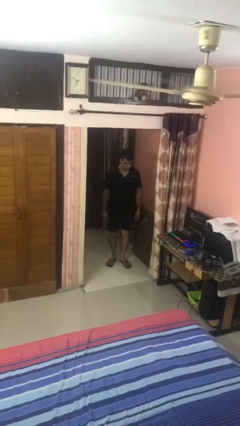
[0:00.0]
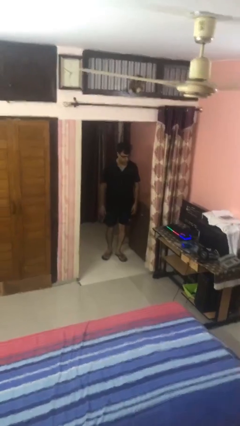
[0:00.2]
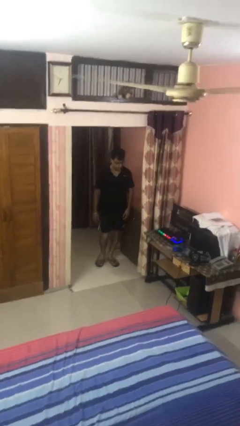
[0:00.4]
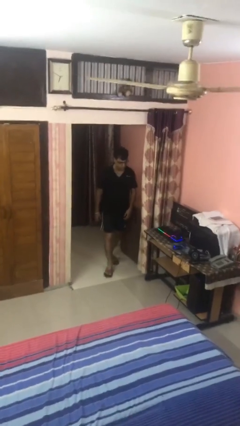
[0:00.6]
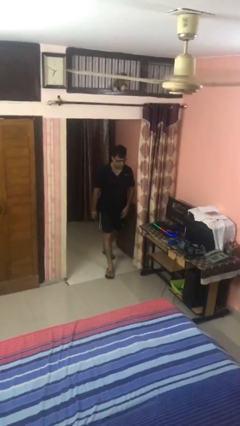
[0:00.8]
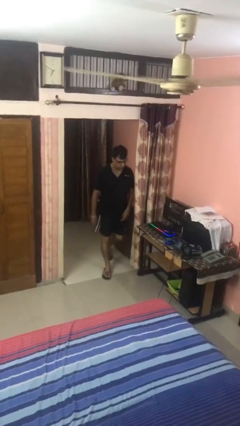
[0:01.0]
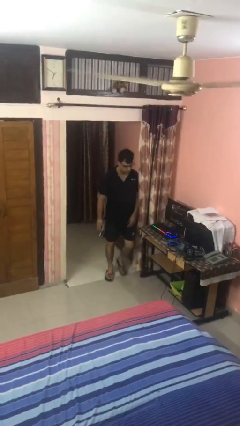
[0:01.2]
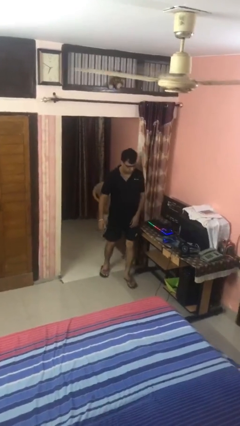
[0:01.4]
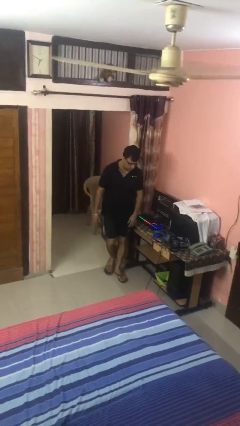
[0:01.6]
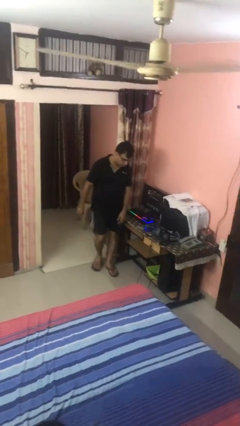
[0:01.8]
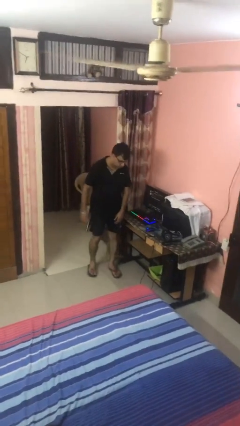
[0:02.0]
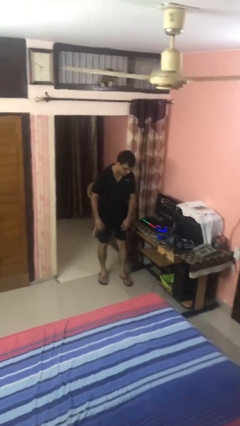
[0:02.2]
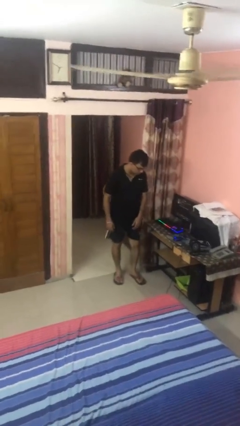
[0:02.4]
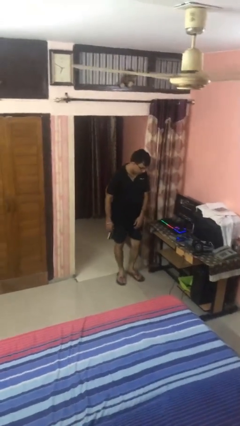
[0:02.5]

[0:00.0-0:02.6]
person bumps into table

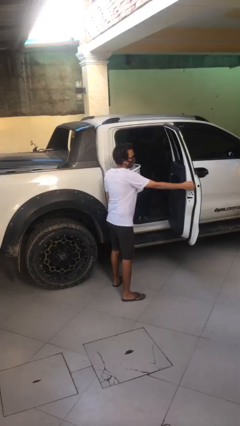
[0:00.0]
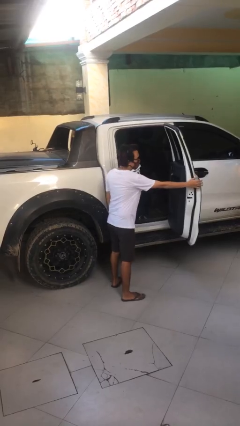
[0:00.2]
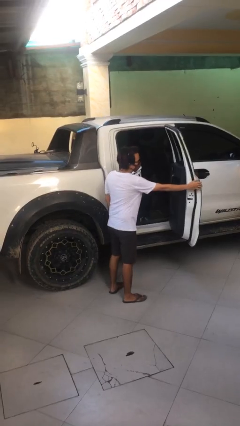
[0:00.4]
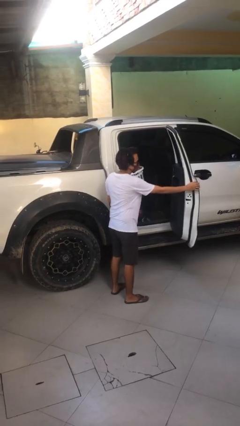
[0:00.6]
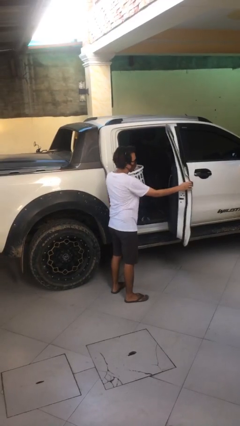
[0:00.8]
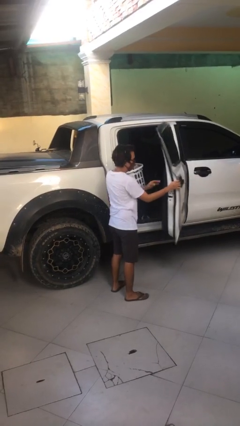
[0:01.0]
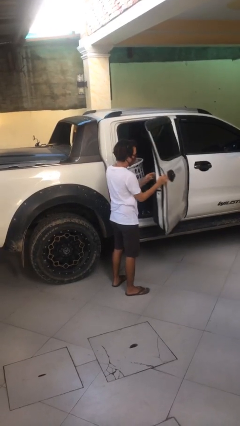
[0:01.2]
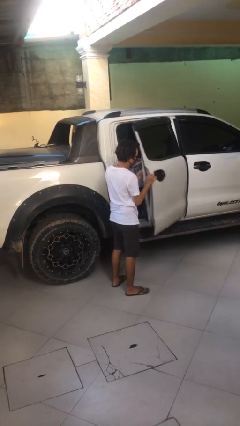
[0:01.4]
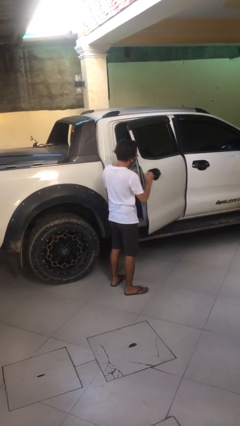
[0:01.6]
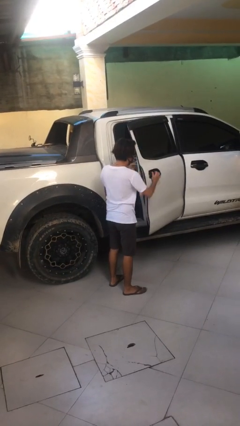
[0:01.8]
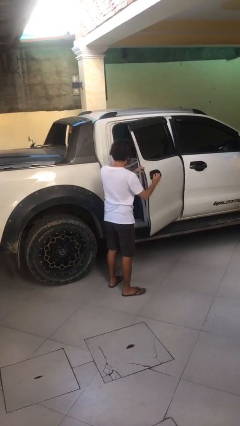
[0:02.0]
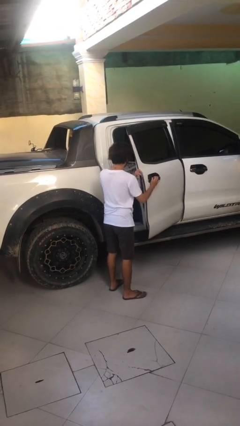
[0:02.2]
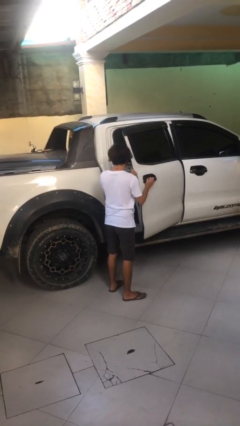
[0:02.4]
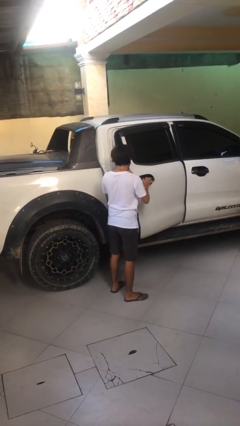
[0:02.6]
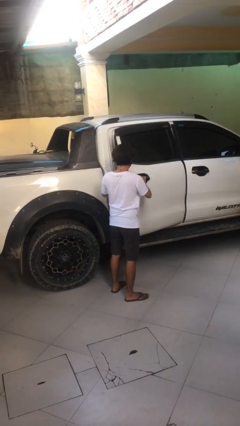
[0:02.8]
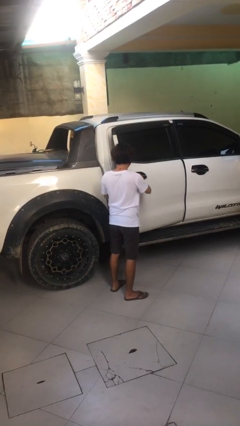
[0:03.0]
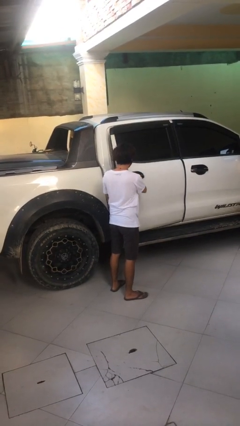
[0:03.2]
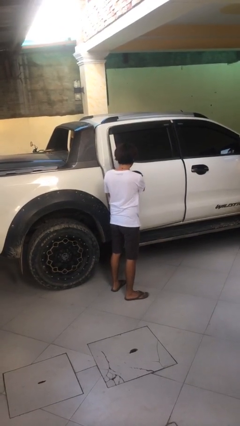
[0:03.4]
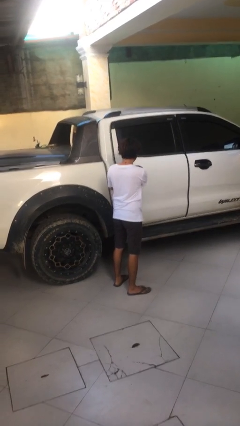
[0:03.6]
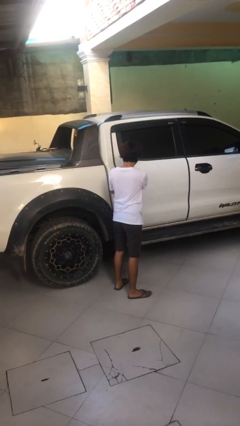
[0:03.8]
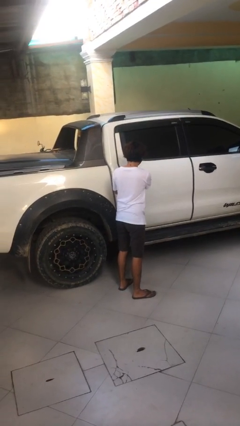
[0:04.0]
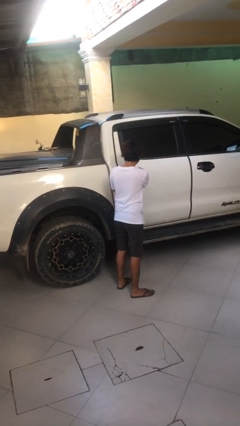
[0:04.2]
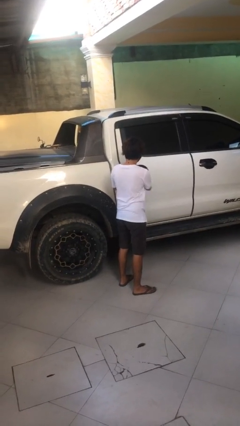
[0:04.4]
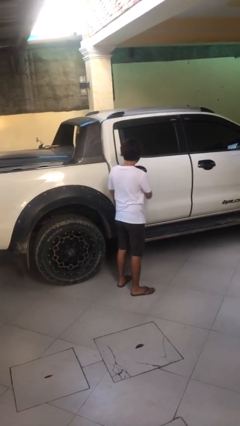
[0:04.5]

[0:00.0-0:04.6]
person closes car door

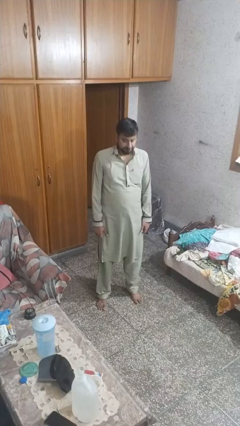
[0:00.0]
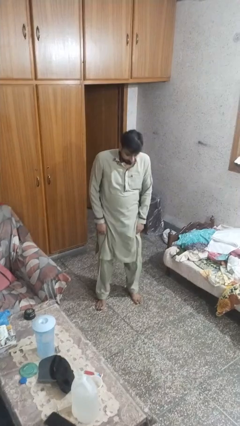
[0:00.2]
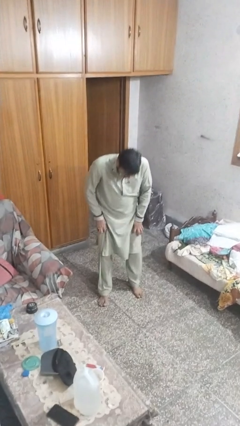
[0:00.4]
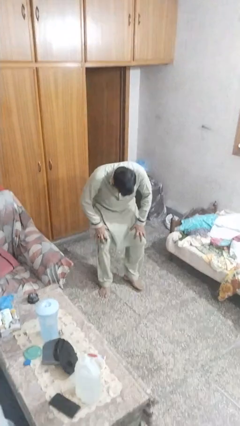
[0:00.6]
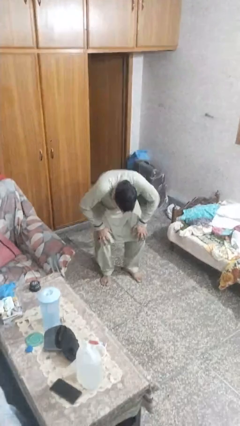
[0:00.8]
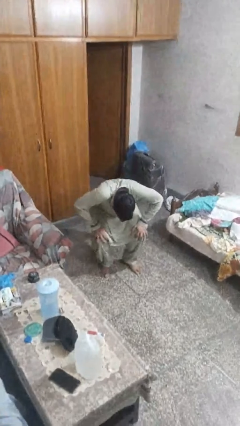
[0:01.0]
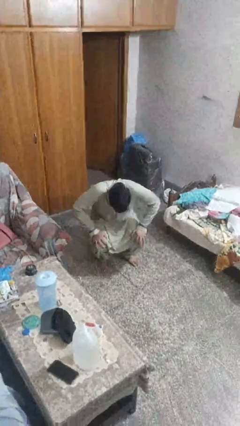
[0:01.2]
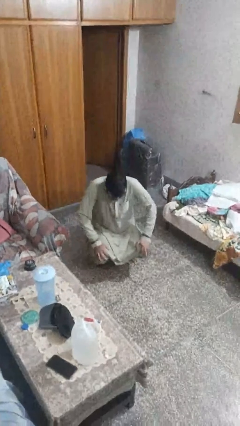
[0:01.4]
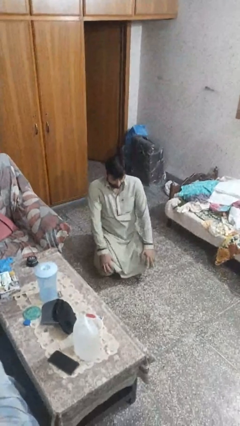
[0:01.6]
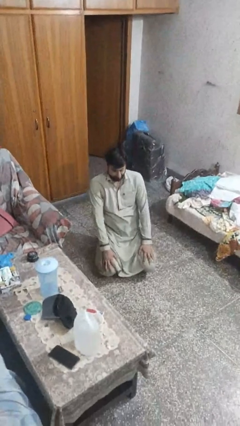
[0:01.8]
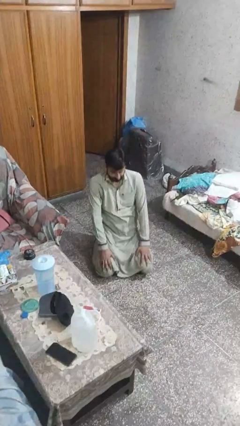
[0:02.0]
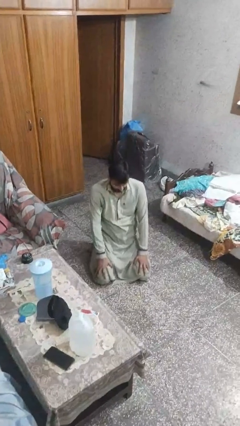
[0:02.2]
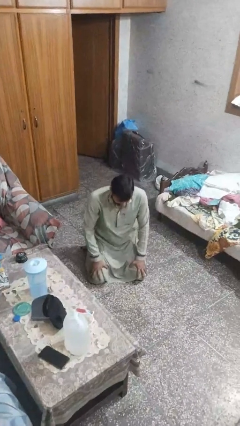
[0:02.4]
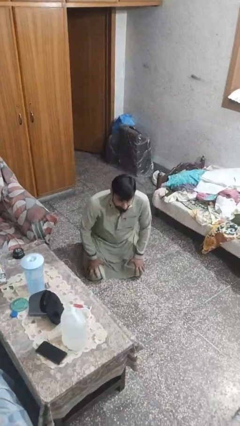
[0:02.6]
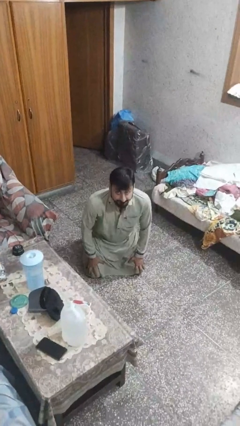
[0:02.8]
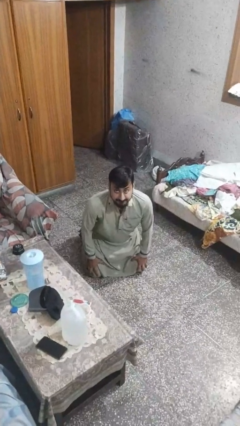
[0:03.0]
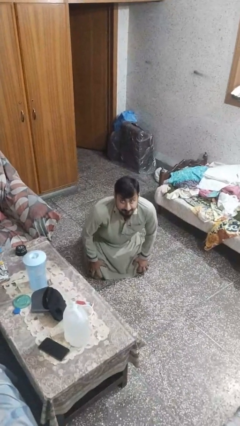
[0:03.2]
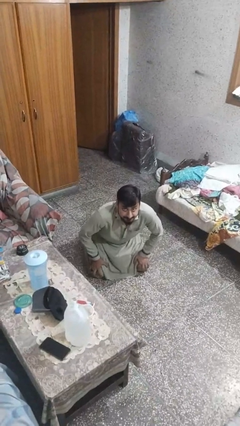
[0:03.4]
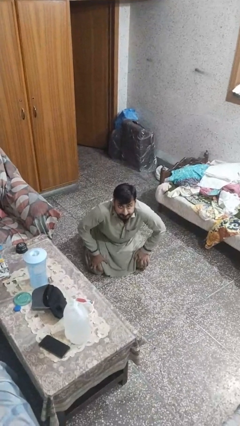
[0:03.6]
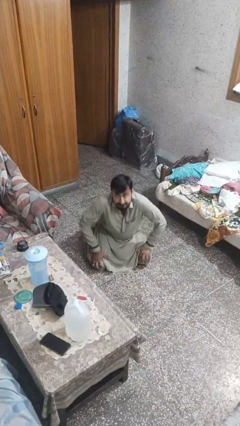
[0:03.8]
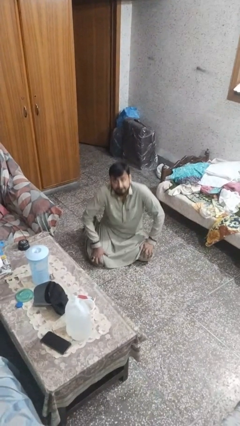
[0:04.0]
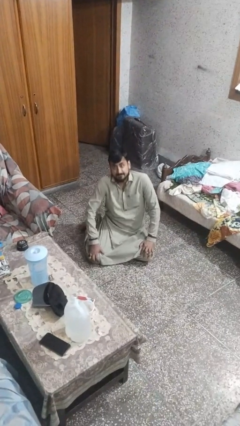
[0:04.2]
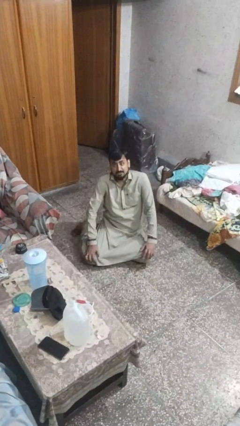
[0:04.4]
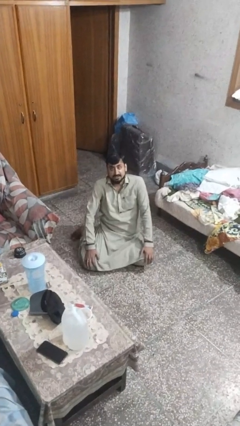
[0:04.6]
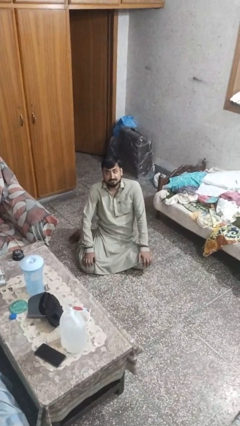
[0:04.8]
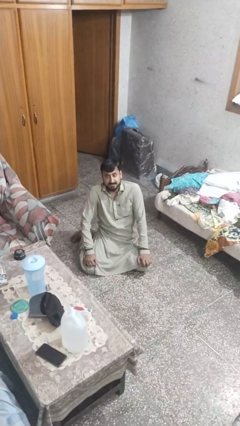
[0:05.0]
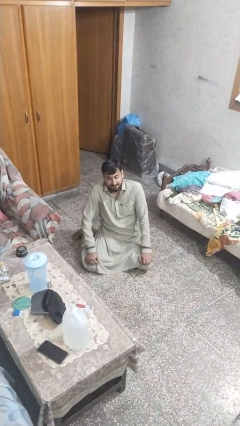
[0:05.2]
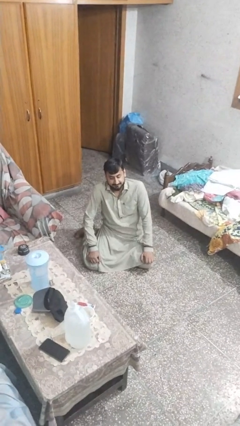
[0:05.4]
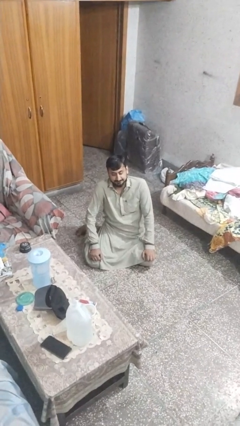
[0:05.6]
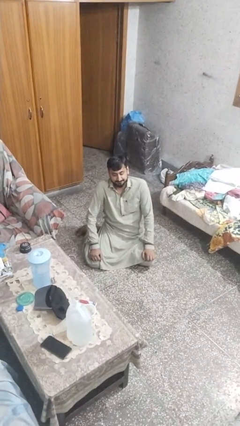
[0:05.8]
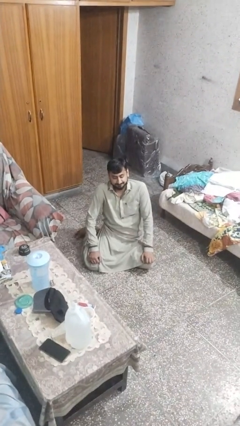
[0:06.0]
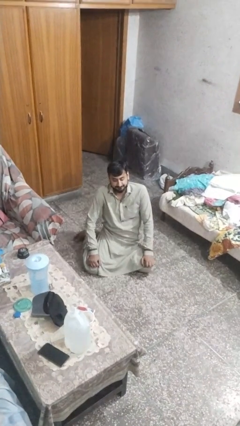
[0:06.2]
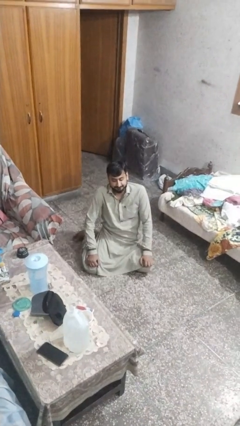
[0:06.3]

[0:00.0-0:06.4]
person sits crisscross

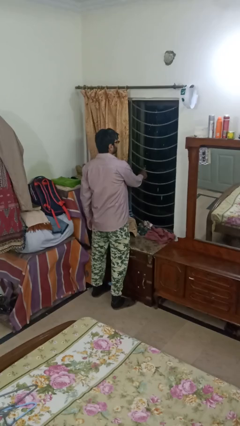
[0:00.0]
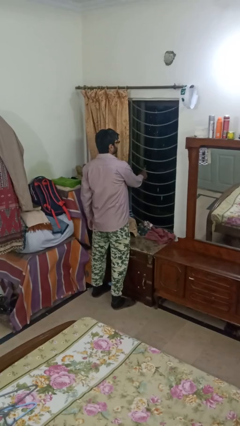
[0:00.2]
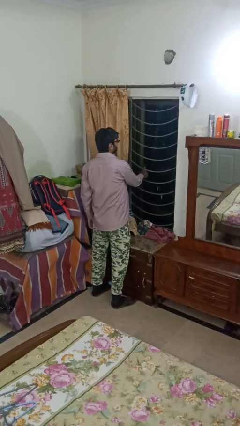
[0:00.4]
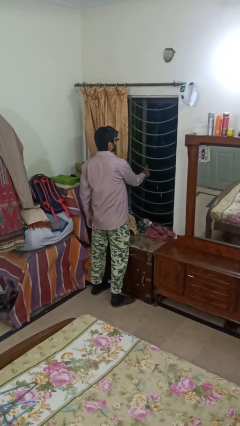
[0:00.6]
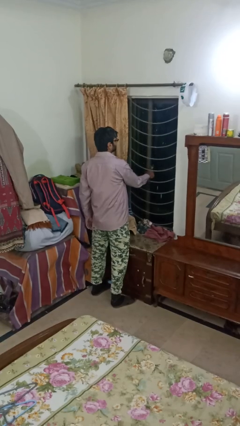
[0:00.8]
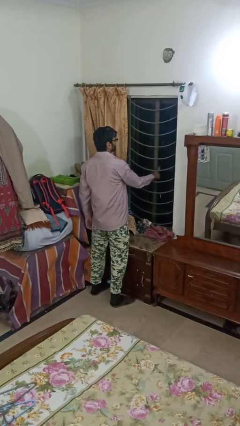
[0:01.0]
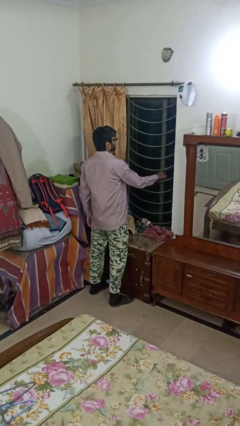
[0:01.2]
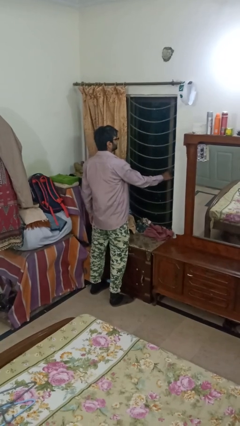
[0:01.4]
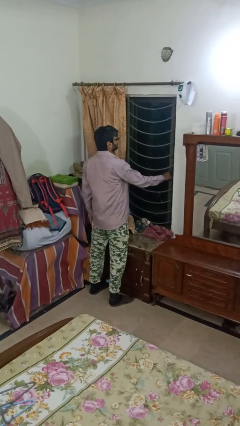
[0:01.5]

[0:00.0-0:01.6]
person closes home window

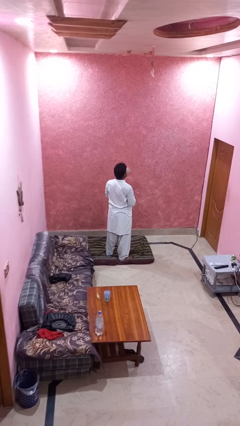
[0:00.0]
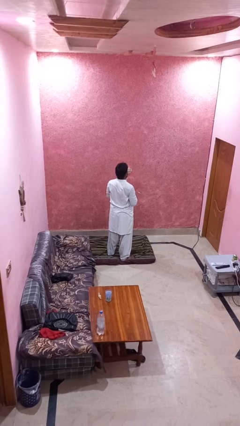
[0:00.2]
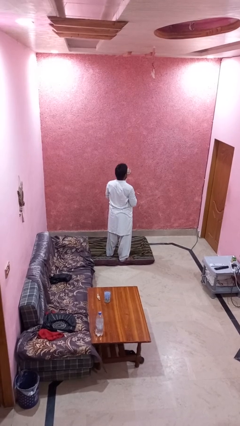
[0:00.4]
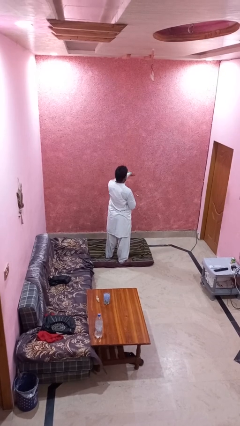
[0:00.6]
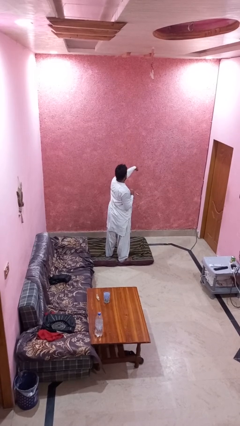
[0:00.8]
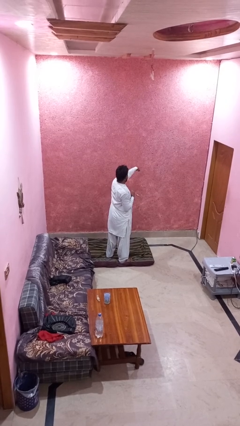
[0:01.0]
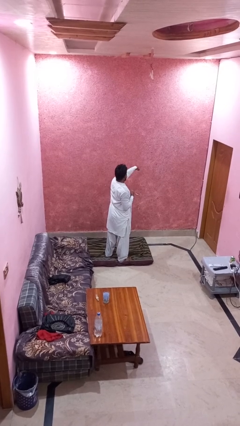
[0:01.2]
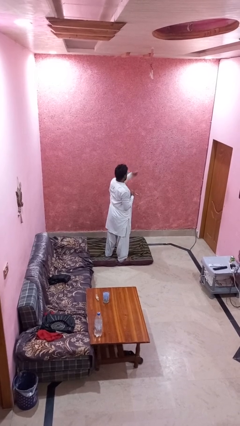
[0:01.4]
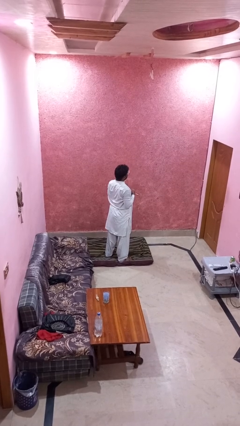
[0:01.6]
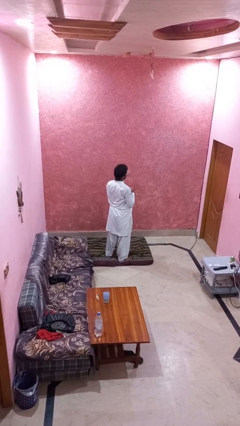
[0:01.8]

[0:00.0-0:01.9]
person punches

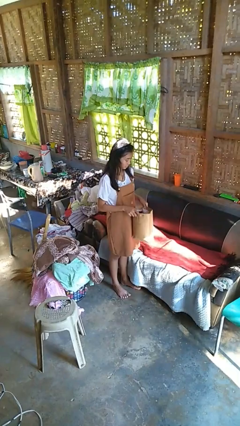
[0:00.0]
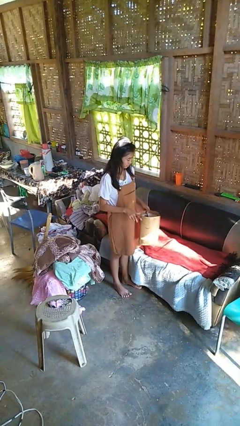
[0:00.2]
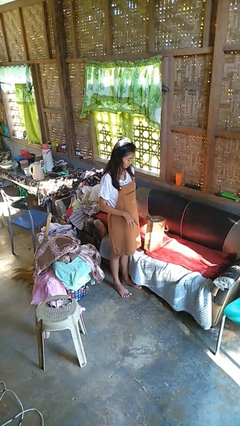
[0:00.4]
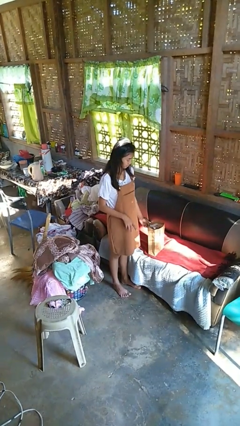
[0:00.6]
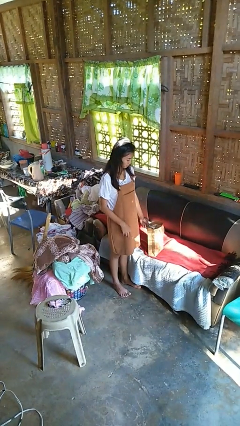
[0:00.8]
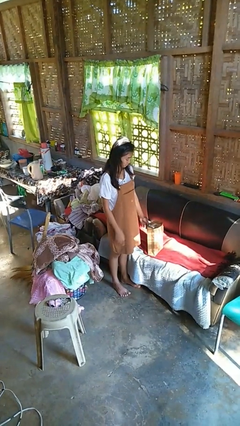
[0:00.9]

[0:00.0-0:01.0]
person puts down object on couch
